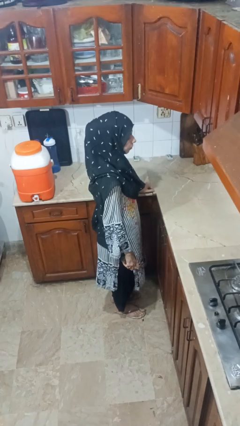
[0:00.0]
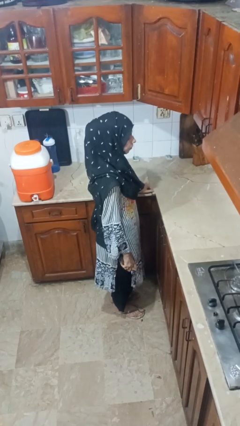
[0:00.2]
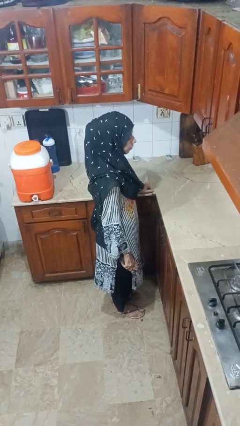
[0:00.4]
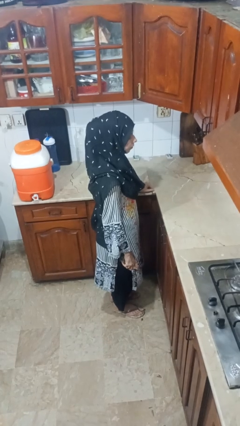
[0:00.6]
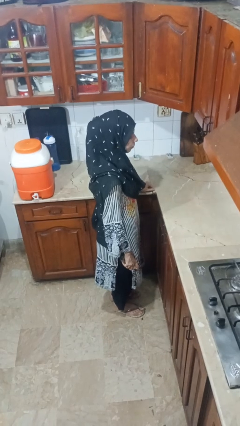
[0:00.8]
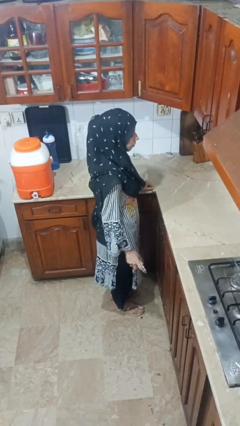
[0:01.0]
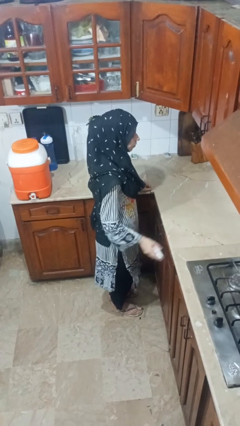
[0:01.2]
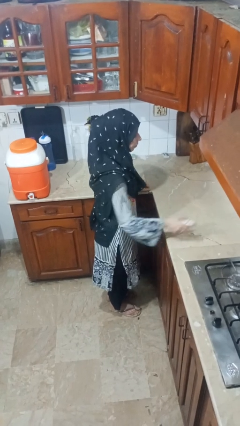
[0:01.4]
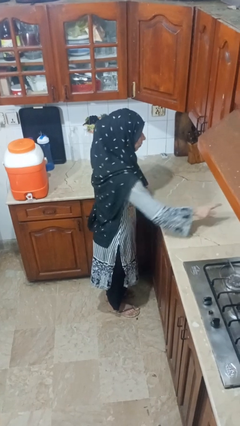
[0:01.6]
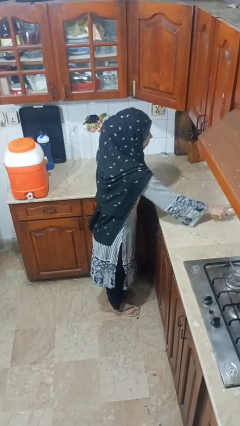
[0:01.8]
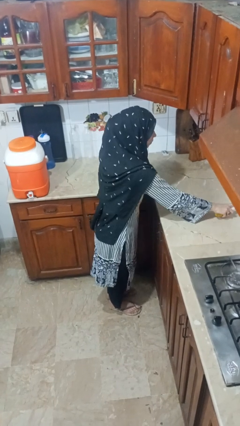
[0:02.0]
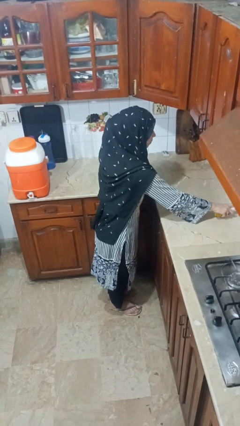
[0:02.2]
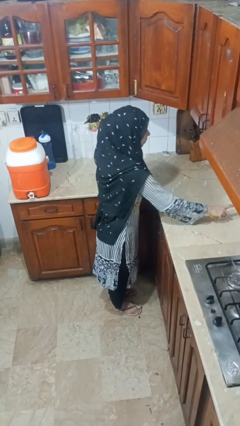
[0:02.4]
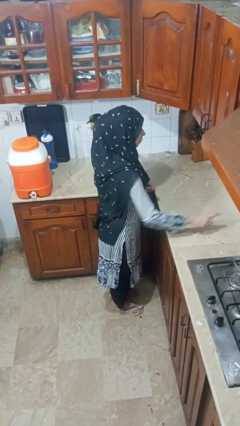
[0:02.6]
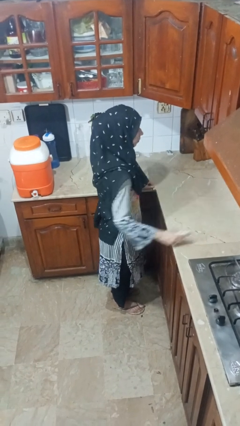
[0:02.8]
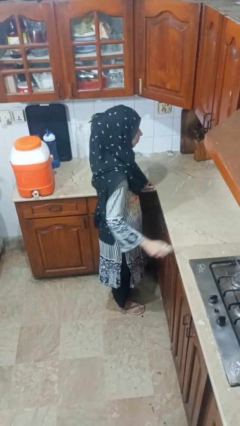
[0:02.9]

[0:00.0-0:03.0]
person sprays from bottle

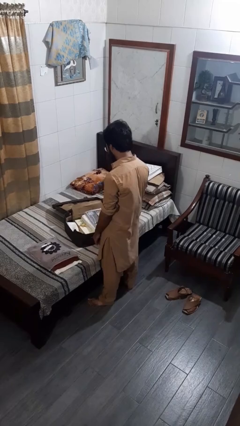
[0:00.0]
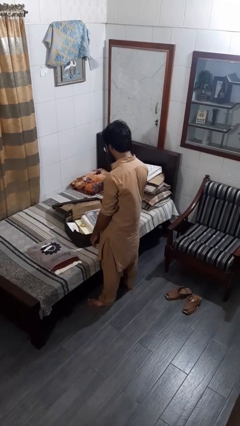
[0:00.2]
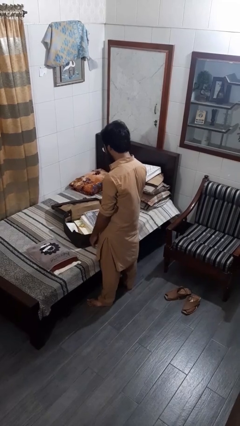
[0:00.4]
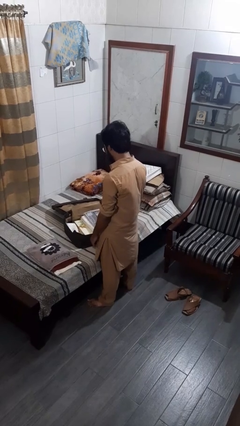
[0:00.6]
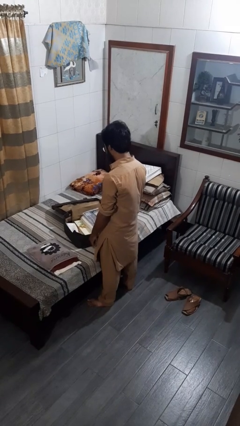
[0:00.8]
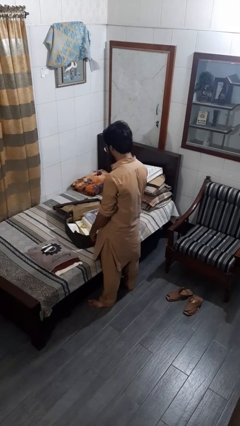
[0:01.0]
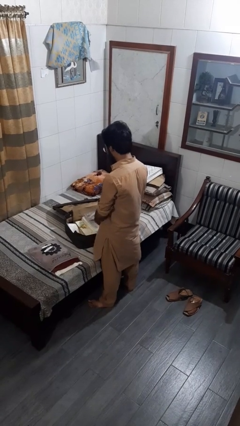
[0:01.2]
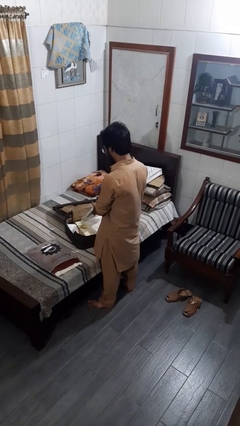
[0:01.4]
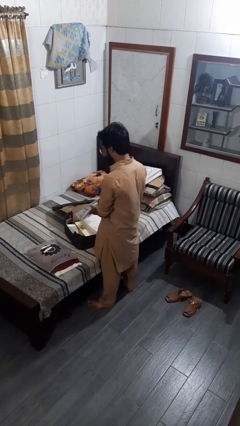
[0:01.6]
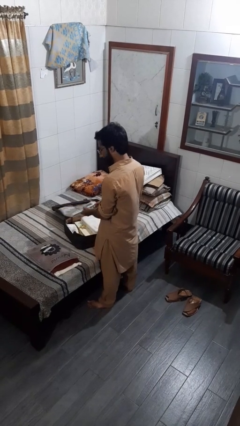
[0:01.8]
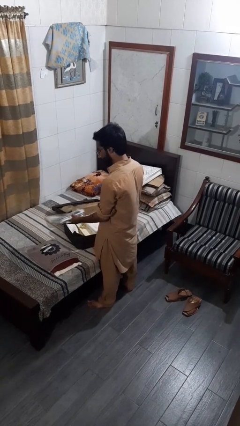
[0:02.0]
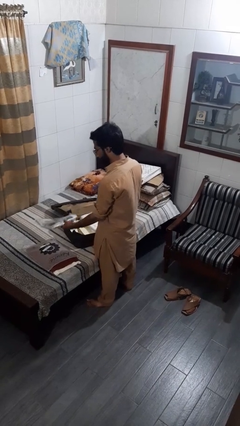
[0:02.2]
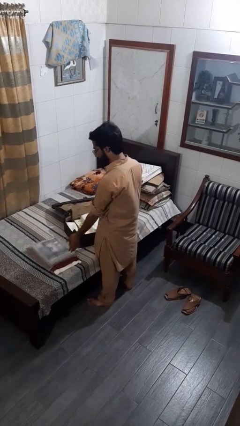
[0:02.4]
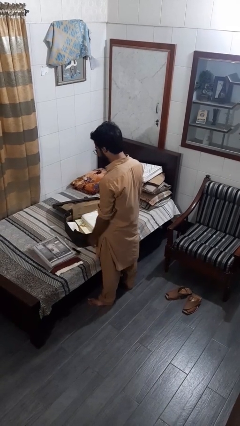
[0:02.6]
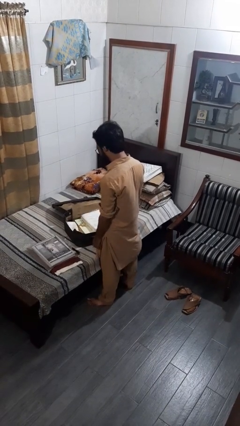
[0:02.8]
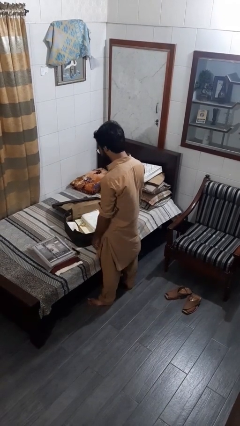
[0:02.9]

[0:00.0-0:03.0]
person unloads clothes from suitcase

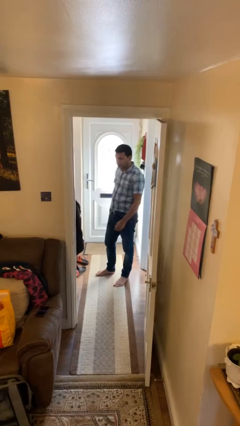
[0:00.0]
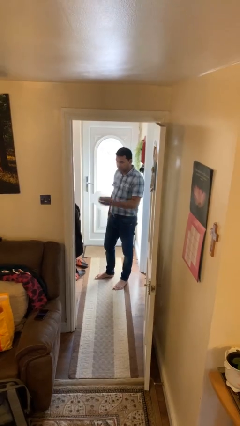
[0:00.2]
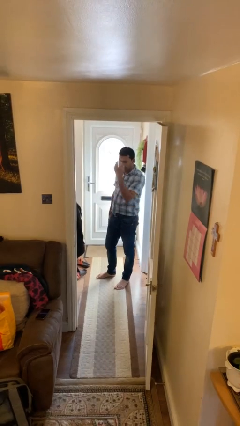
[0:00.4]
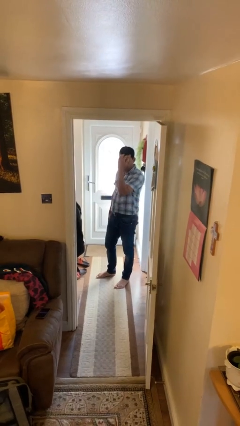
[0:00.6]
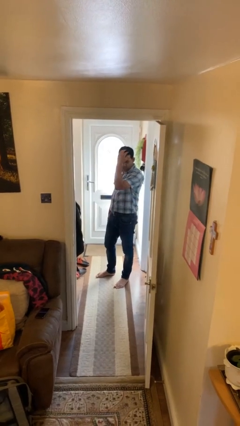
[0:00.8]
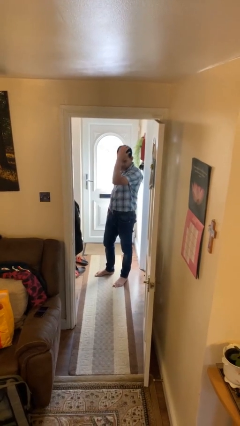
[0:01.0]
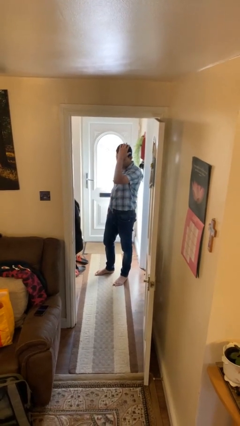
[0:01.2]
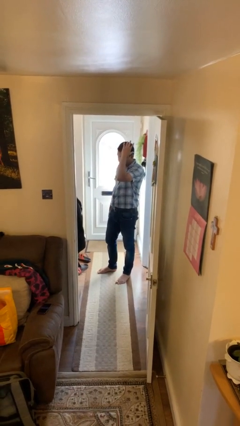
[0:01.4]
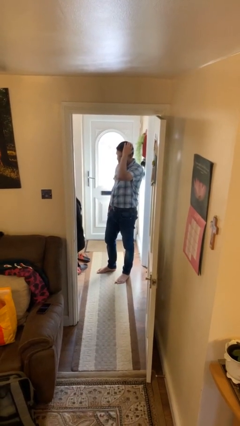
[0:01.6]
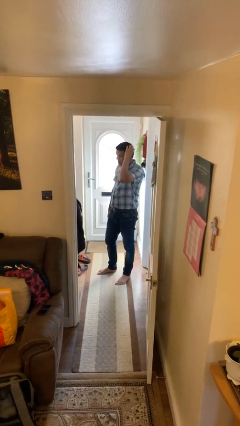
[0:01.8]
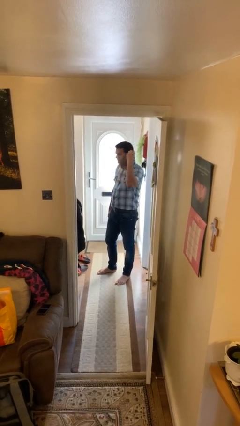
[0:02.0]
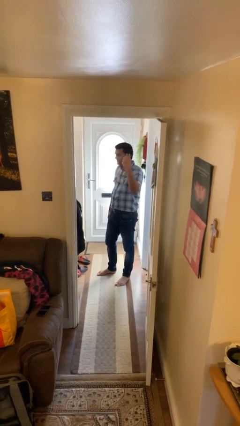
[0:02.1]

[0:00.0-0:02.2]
person strokes hair

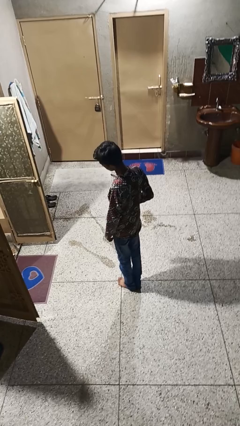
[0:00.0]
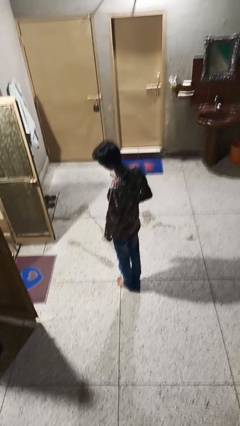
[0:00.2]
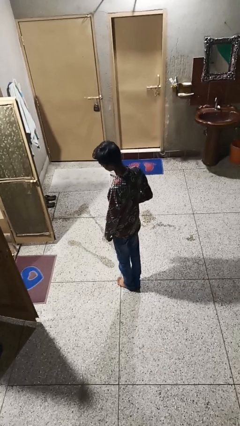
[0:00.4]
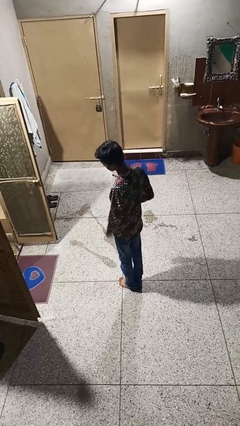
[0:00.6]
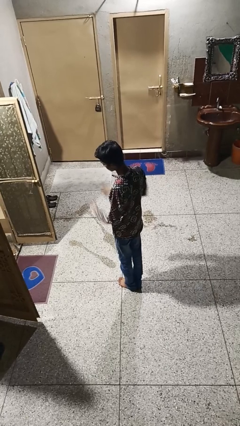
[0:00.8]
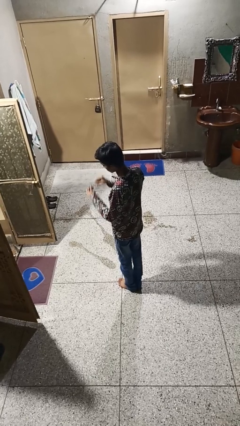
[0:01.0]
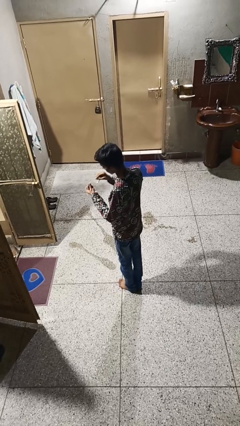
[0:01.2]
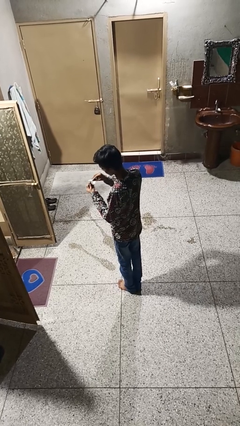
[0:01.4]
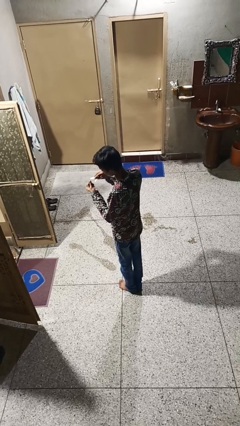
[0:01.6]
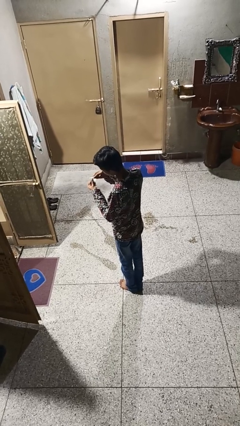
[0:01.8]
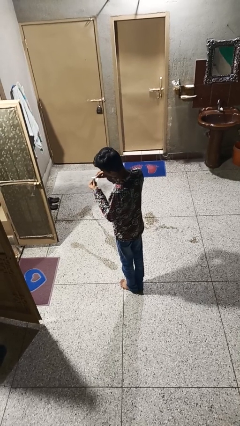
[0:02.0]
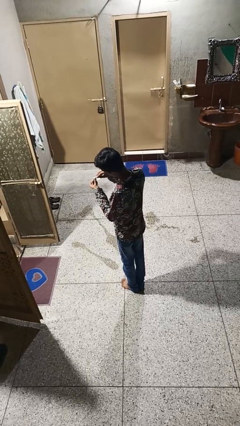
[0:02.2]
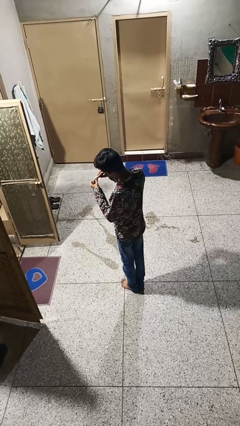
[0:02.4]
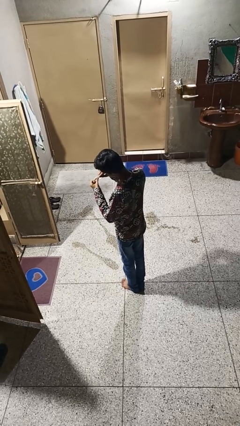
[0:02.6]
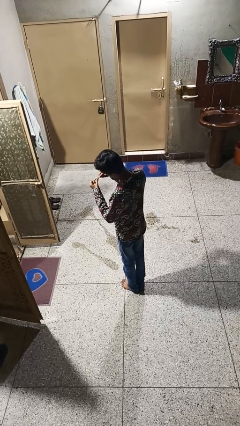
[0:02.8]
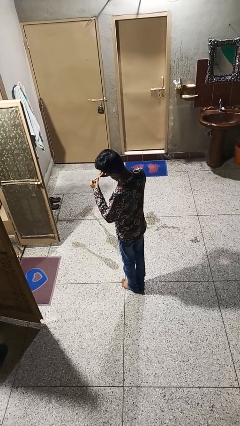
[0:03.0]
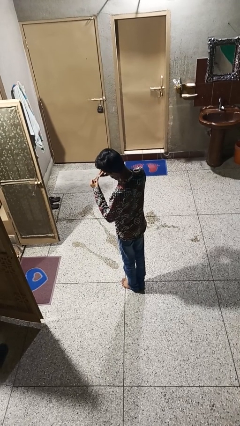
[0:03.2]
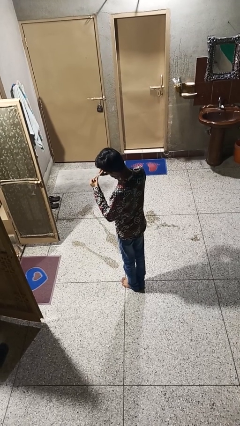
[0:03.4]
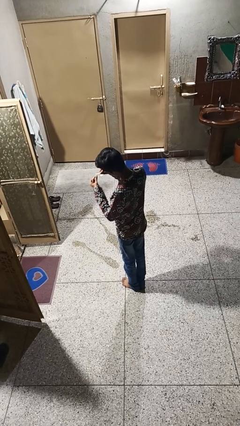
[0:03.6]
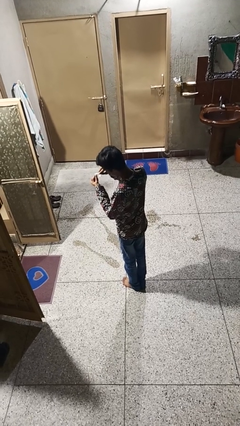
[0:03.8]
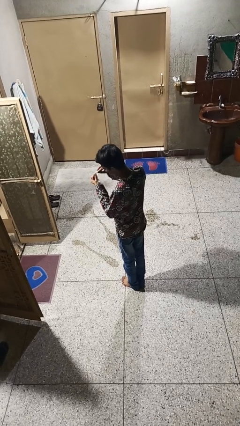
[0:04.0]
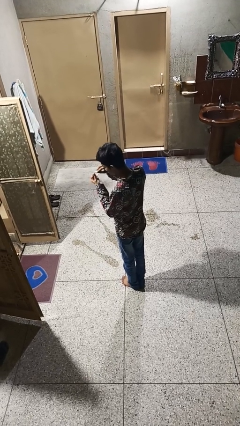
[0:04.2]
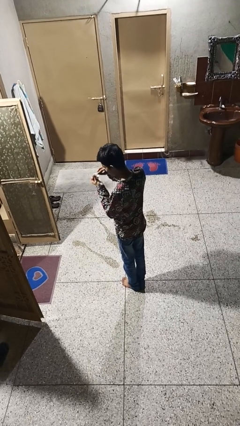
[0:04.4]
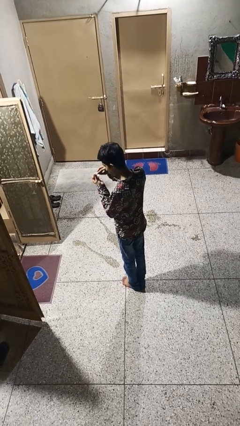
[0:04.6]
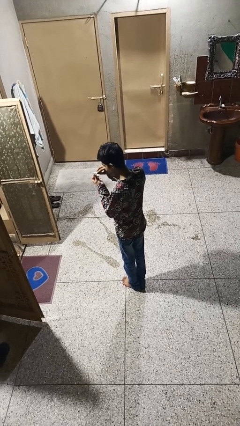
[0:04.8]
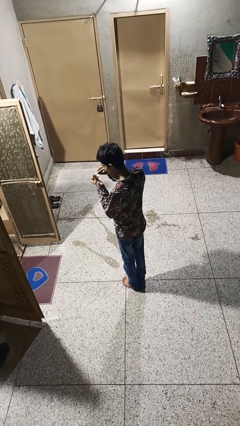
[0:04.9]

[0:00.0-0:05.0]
person files fingernails

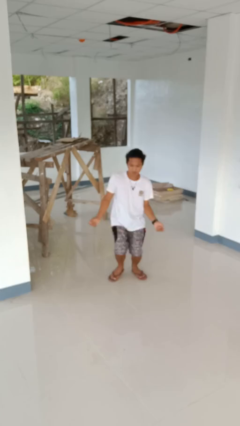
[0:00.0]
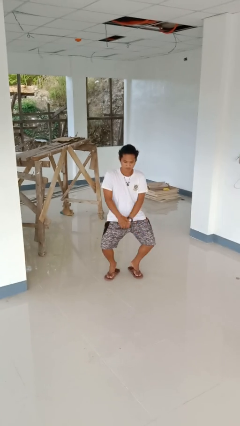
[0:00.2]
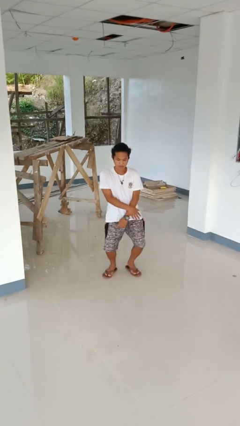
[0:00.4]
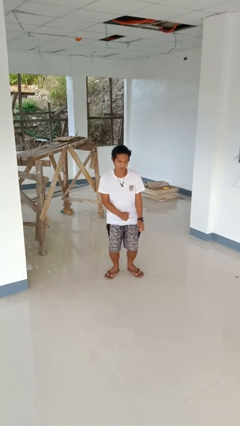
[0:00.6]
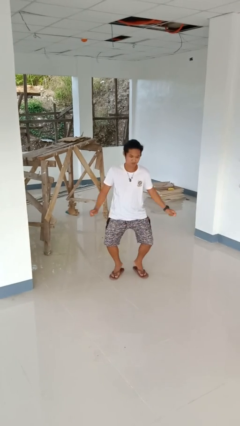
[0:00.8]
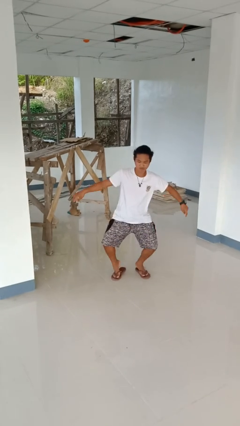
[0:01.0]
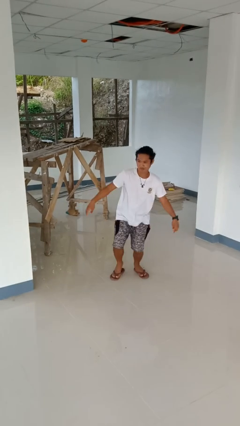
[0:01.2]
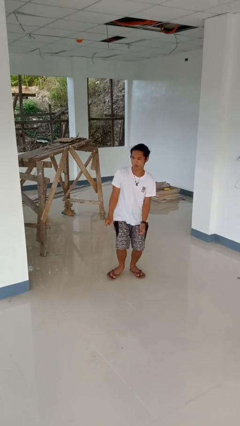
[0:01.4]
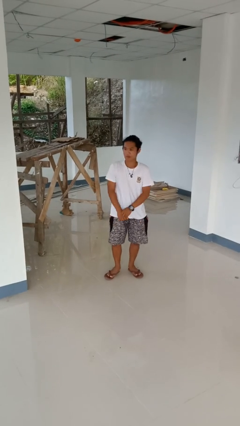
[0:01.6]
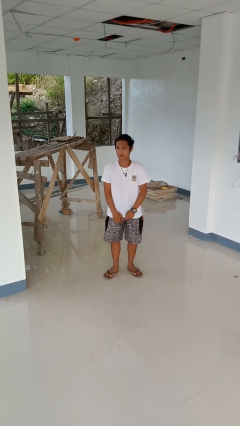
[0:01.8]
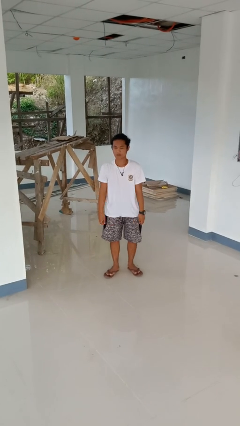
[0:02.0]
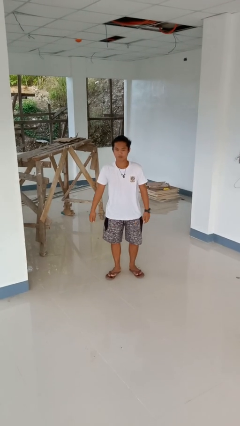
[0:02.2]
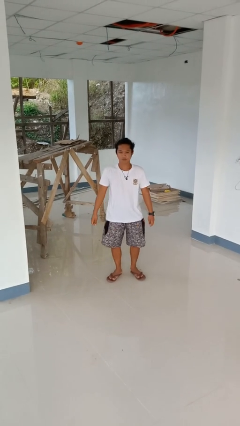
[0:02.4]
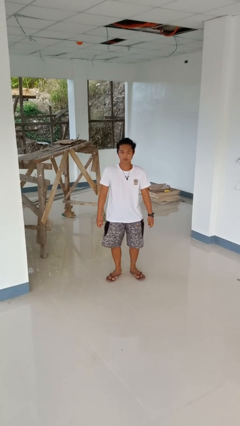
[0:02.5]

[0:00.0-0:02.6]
person dances in place

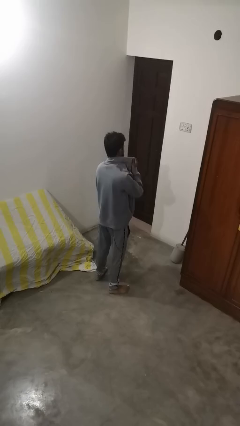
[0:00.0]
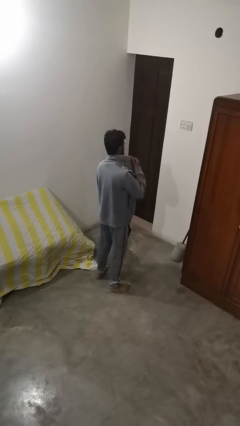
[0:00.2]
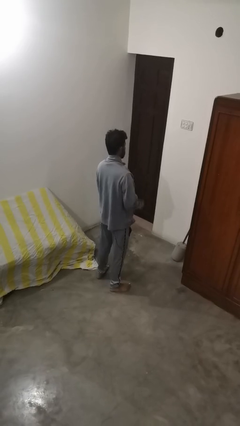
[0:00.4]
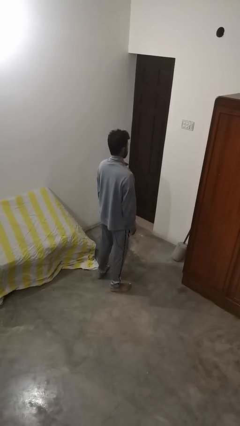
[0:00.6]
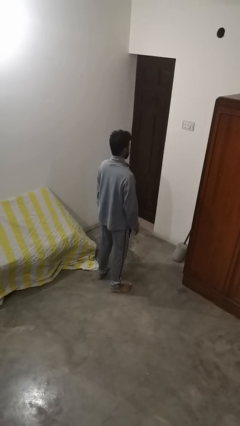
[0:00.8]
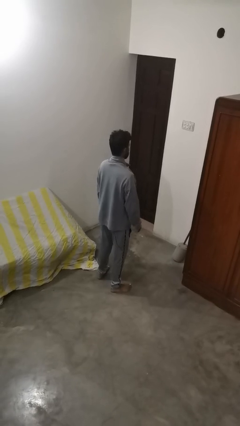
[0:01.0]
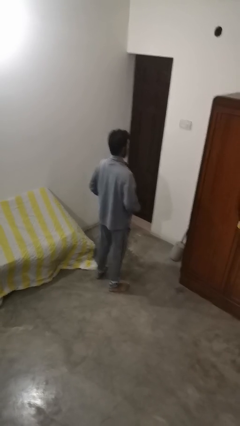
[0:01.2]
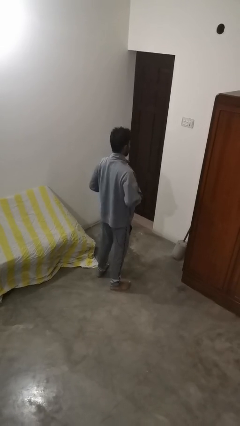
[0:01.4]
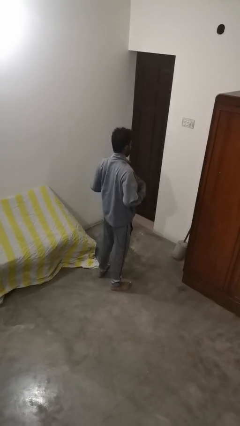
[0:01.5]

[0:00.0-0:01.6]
person unzips jacket
